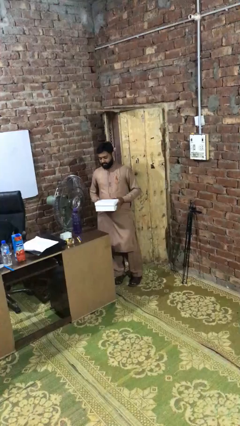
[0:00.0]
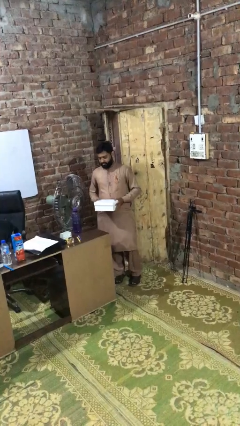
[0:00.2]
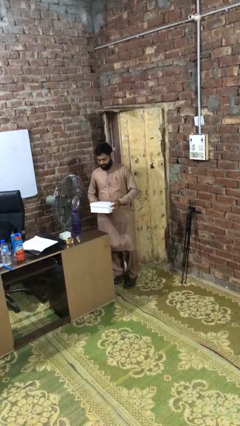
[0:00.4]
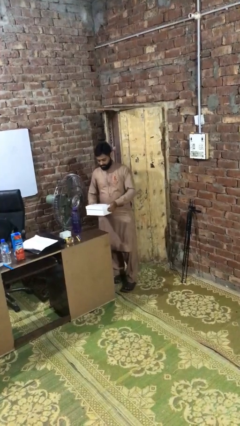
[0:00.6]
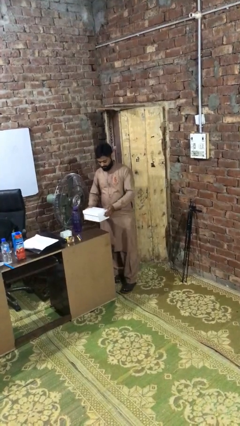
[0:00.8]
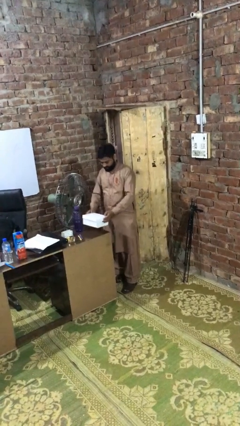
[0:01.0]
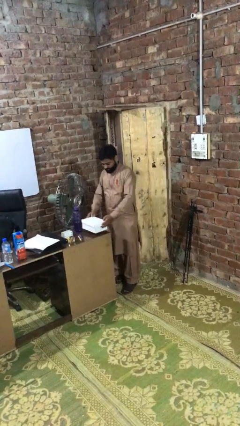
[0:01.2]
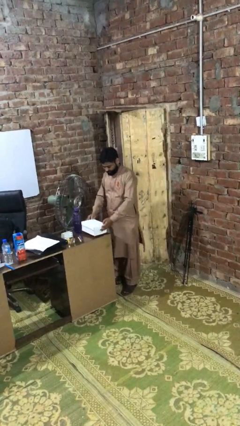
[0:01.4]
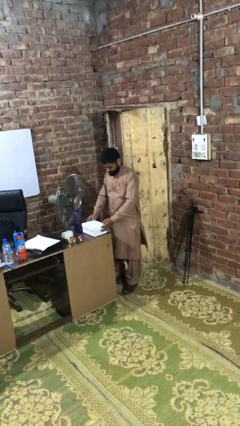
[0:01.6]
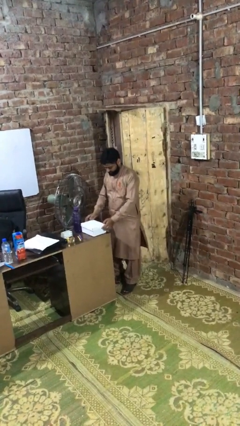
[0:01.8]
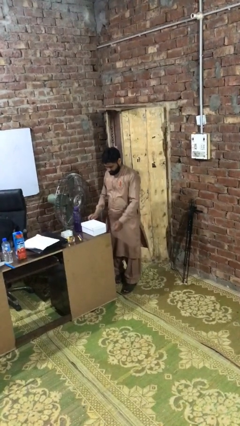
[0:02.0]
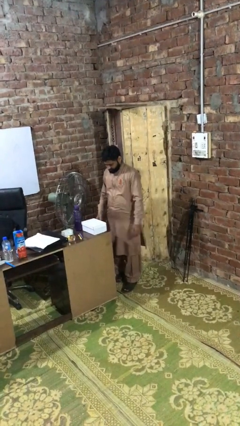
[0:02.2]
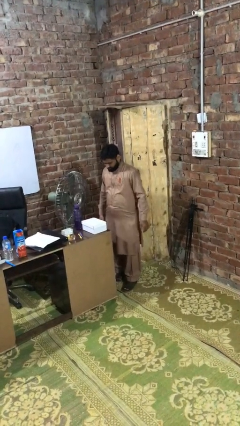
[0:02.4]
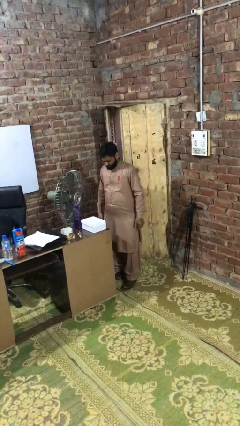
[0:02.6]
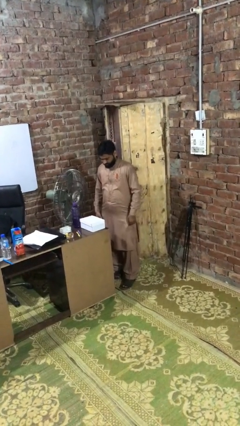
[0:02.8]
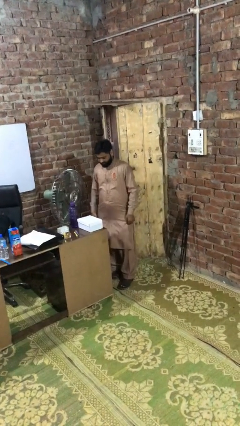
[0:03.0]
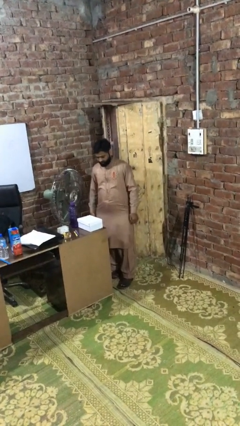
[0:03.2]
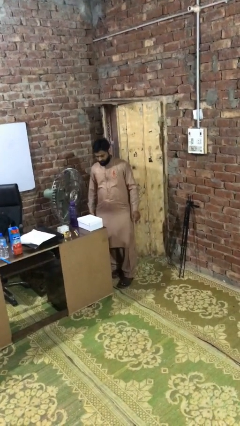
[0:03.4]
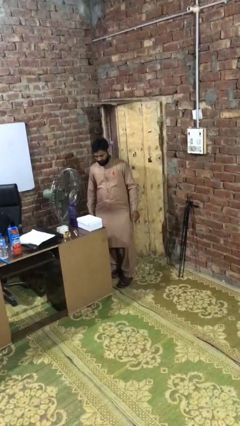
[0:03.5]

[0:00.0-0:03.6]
person puts down object on table

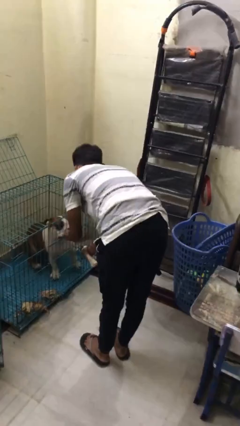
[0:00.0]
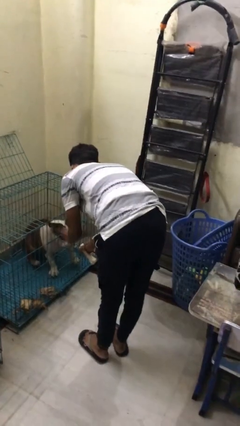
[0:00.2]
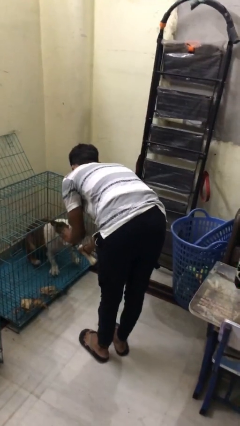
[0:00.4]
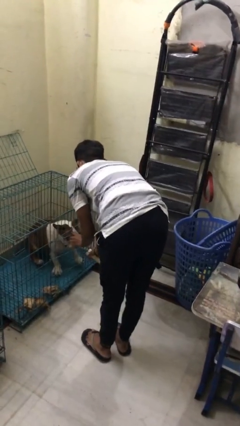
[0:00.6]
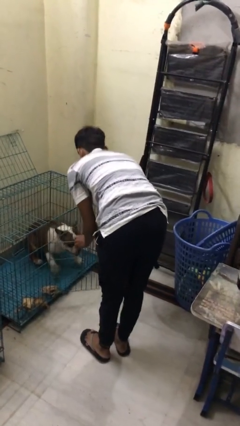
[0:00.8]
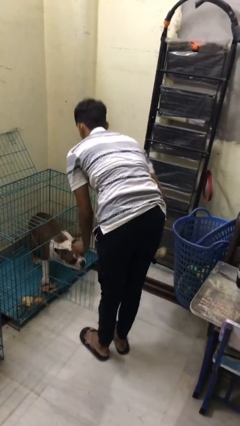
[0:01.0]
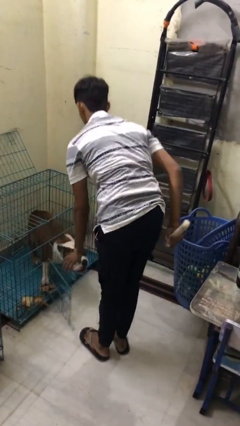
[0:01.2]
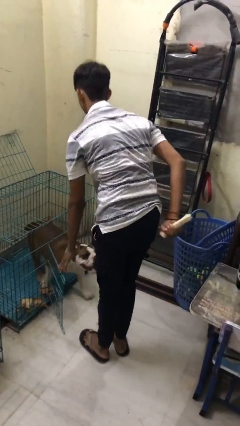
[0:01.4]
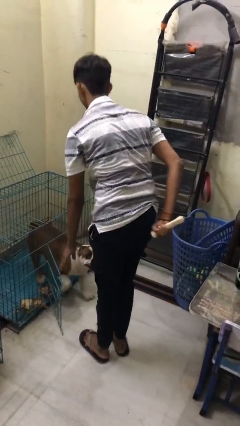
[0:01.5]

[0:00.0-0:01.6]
person uncrates dog

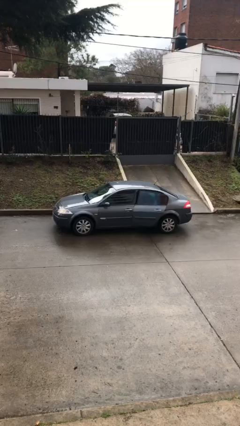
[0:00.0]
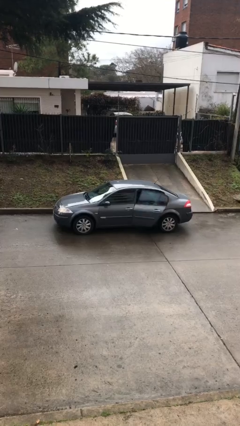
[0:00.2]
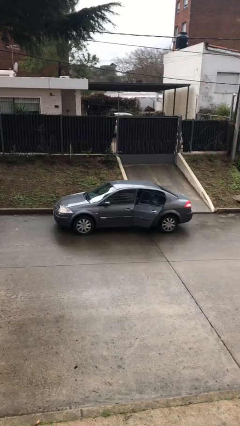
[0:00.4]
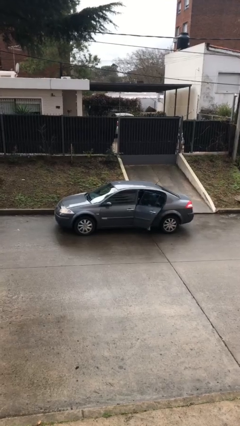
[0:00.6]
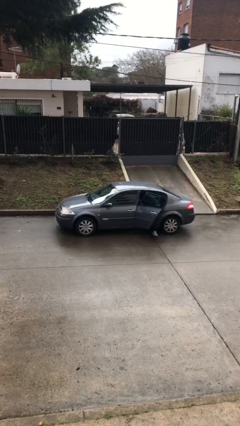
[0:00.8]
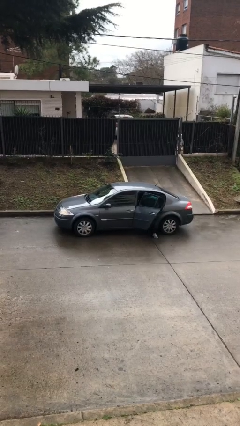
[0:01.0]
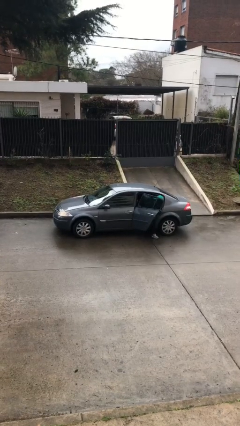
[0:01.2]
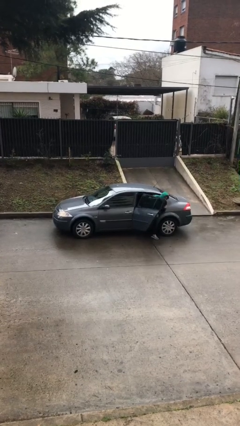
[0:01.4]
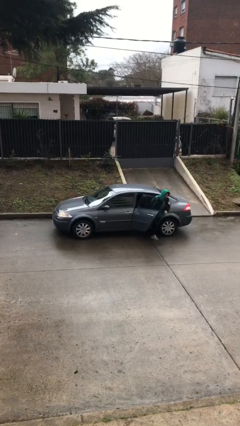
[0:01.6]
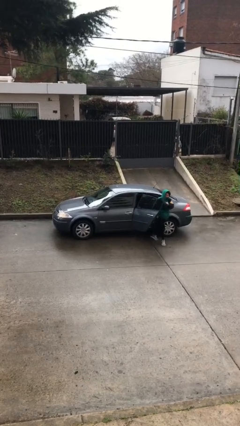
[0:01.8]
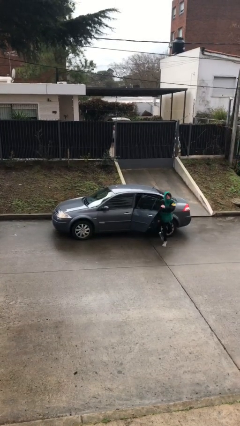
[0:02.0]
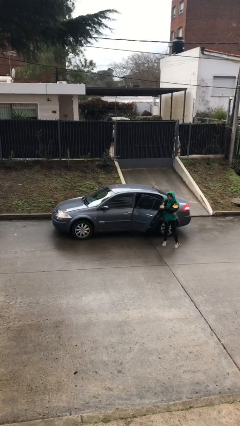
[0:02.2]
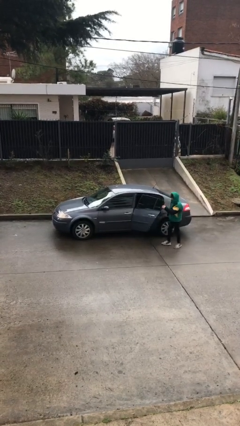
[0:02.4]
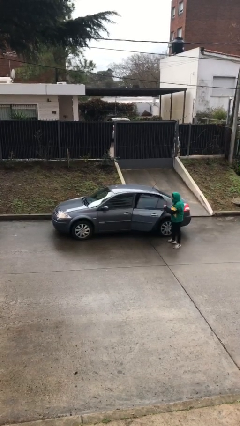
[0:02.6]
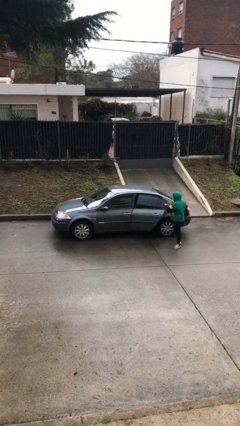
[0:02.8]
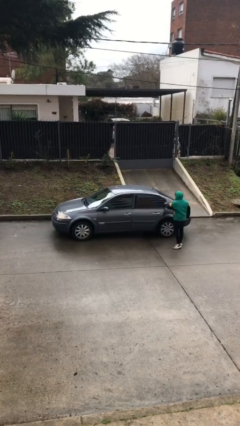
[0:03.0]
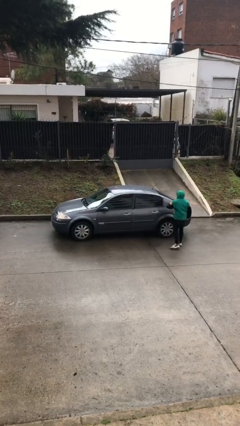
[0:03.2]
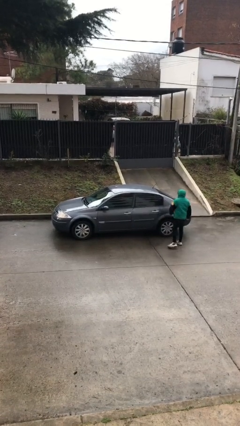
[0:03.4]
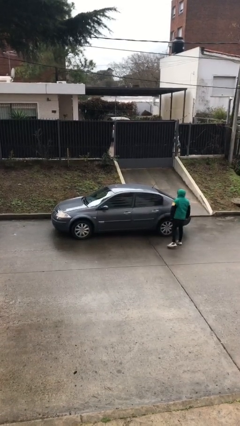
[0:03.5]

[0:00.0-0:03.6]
car drops off person

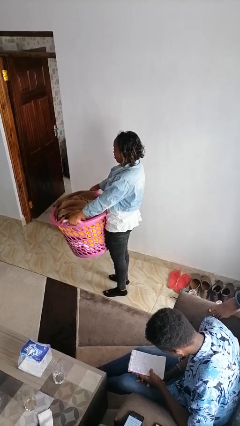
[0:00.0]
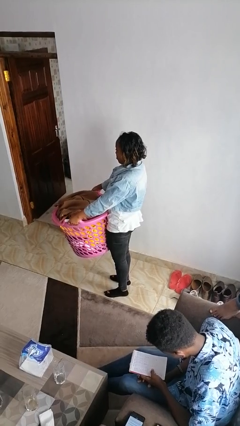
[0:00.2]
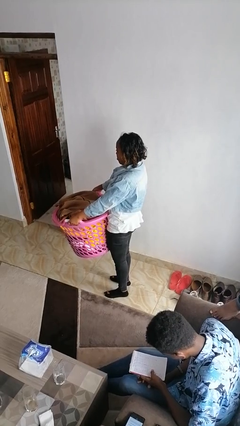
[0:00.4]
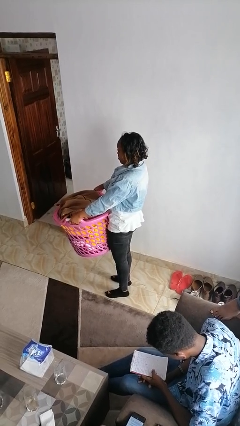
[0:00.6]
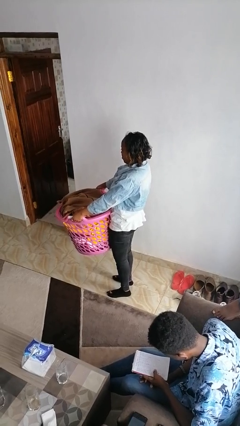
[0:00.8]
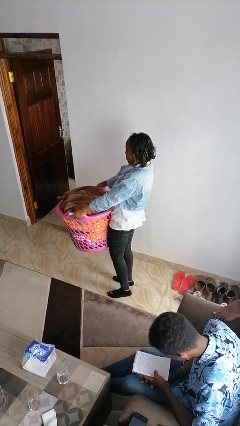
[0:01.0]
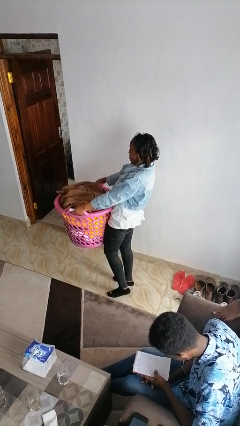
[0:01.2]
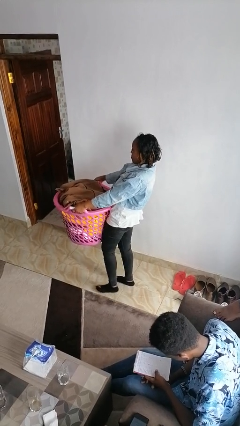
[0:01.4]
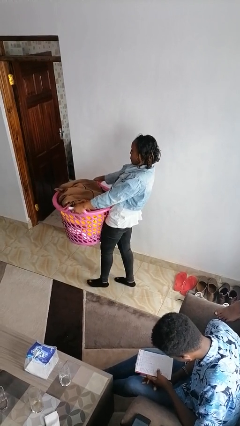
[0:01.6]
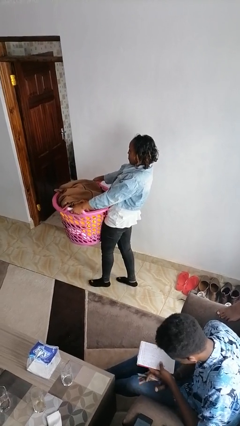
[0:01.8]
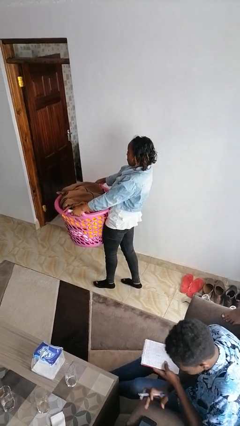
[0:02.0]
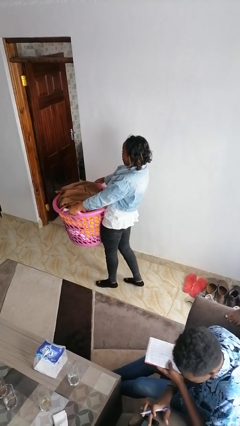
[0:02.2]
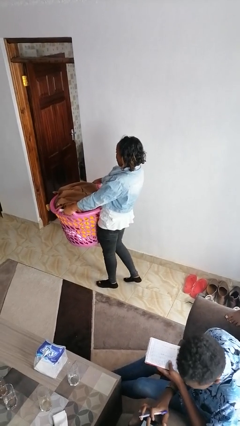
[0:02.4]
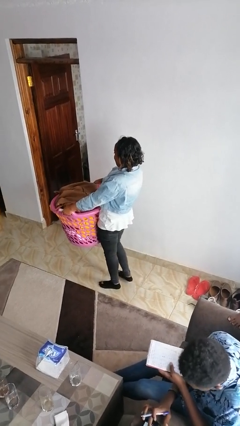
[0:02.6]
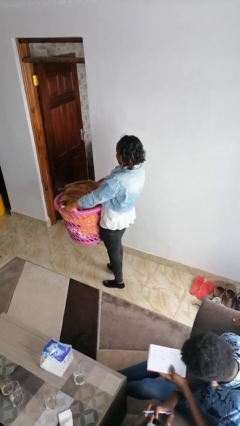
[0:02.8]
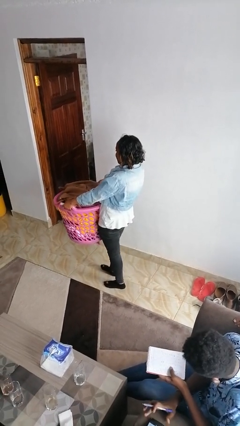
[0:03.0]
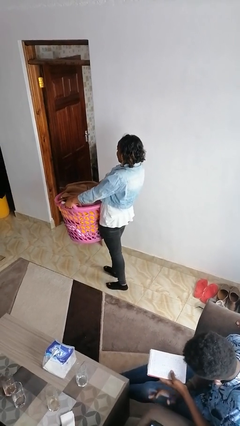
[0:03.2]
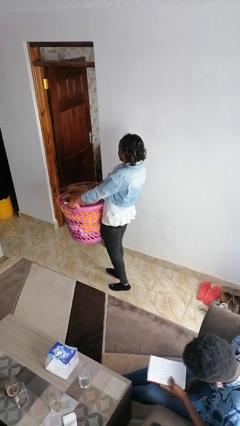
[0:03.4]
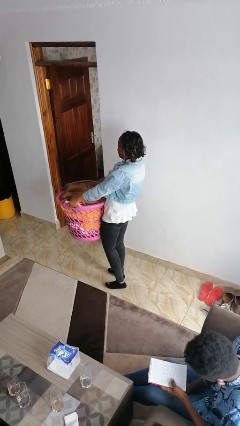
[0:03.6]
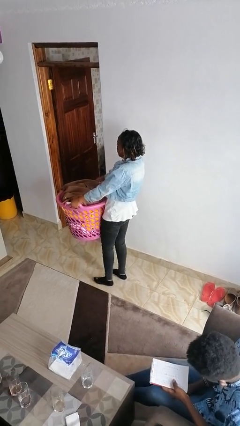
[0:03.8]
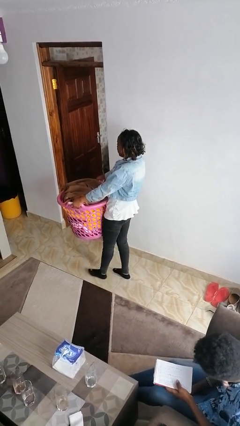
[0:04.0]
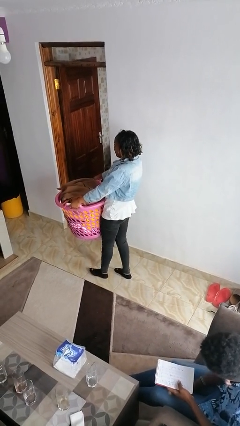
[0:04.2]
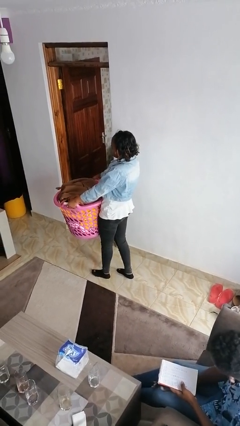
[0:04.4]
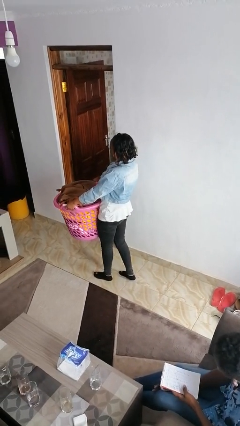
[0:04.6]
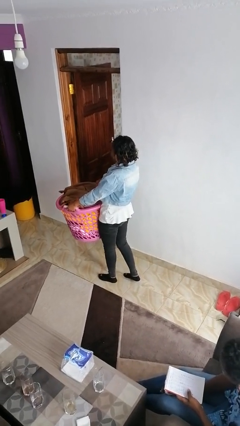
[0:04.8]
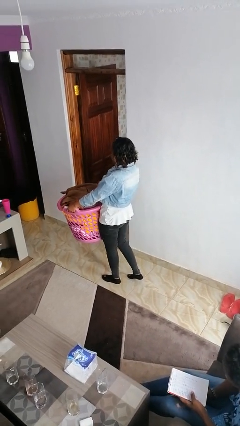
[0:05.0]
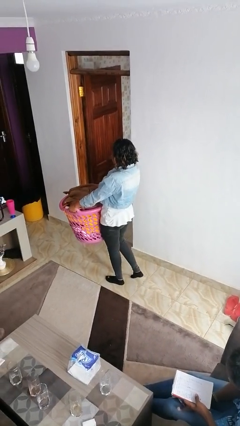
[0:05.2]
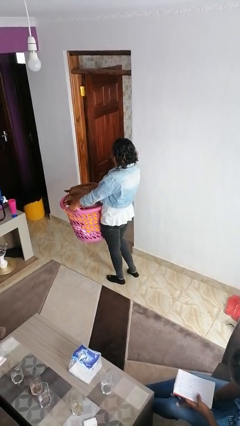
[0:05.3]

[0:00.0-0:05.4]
person carries laundry basket

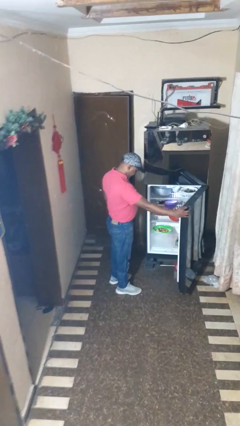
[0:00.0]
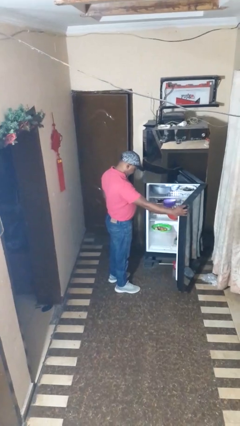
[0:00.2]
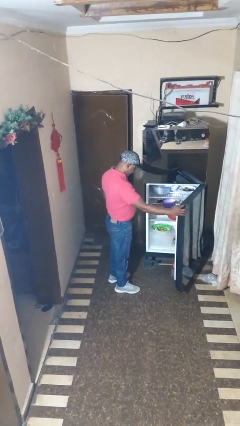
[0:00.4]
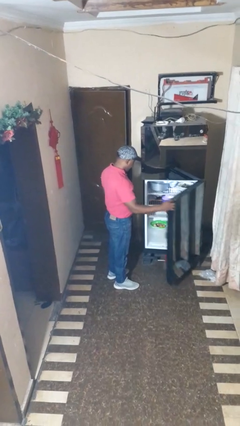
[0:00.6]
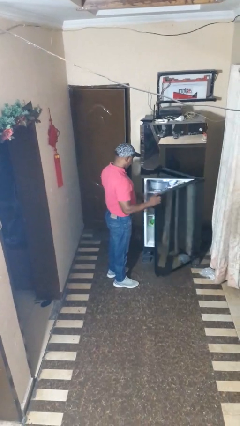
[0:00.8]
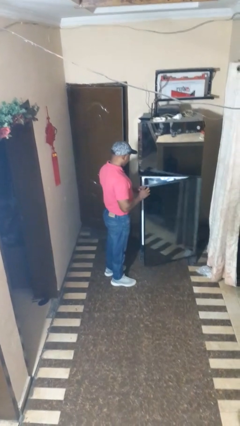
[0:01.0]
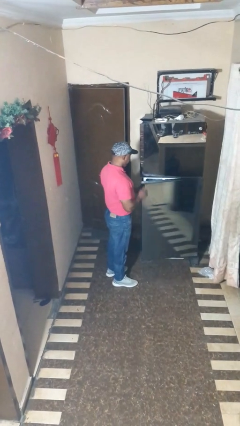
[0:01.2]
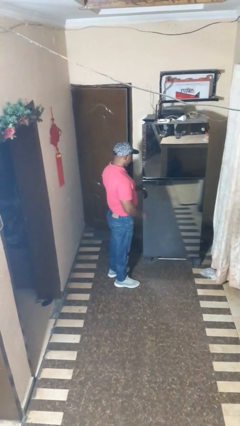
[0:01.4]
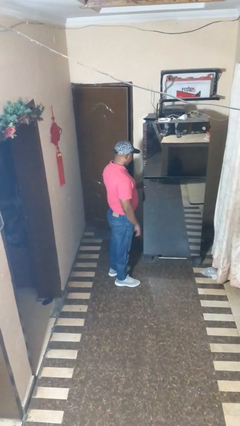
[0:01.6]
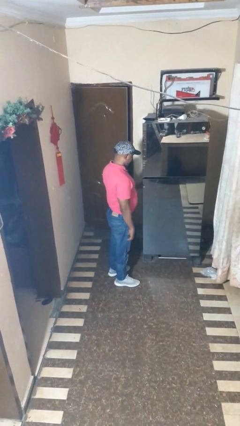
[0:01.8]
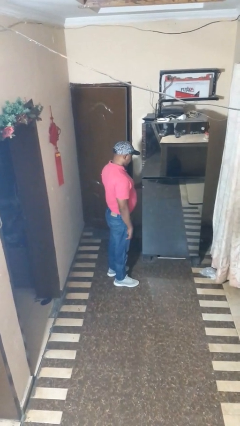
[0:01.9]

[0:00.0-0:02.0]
person closes refrigerator

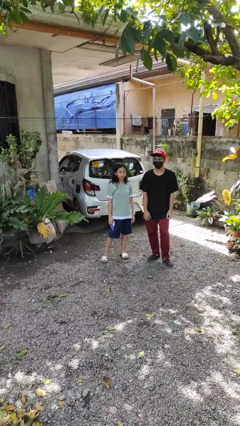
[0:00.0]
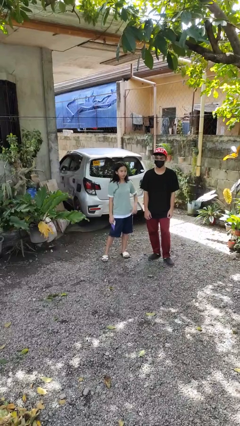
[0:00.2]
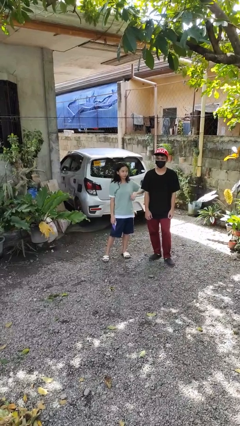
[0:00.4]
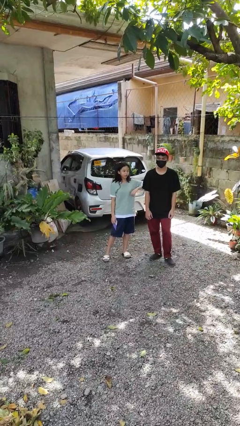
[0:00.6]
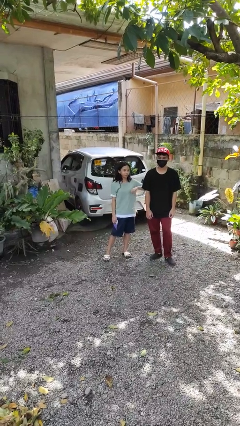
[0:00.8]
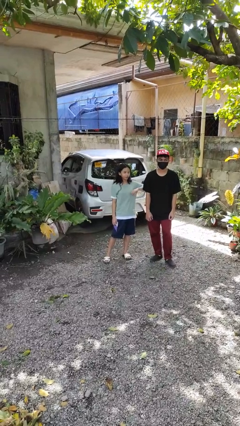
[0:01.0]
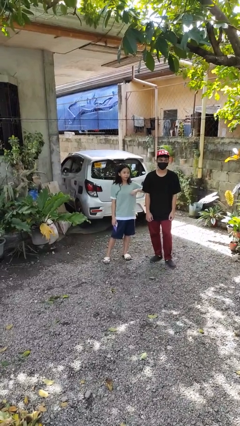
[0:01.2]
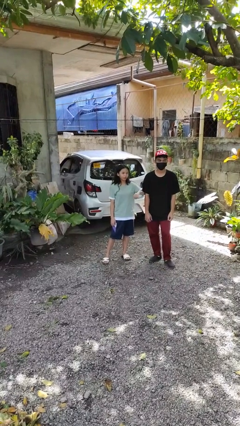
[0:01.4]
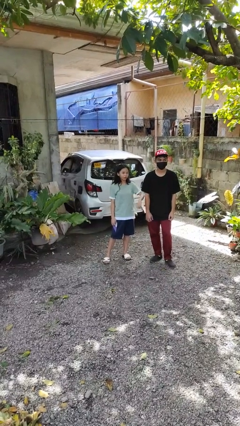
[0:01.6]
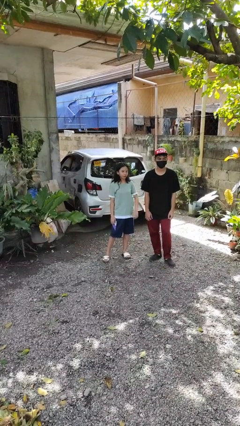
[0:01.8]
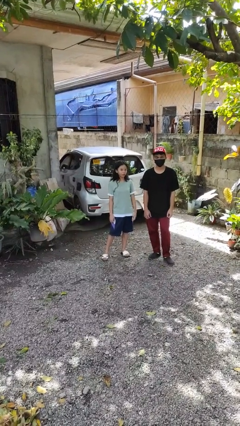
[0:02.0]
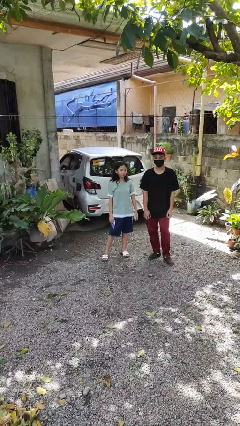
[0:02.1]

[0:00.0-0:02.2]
person nudges person with elbow
